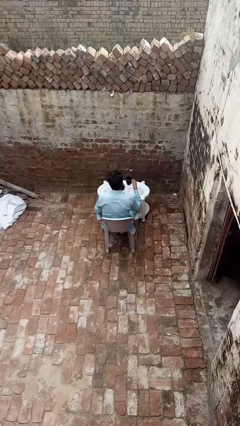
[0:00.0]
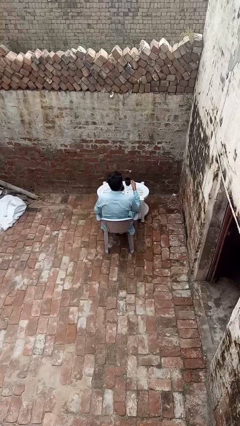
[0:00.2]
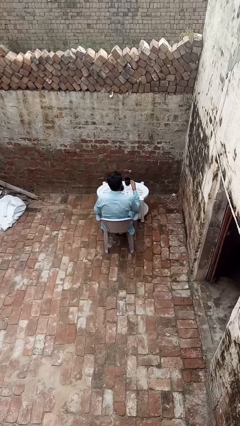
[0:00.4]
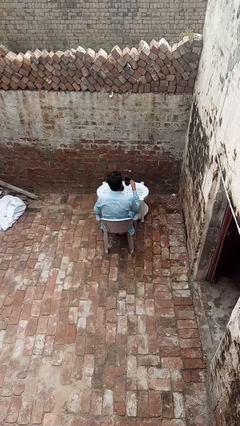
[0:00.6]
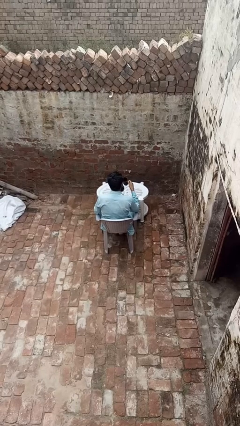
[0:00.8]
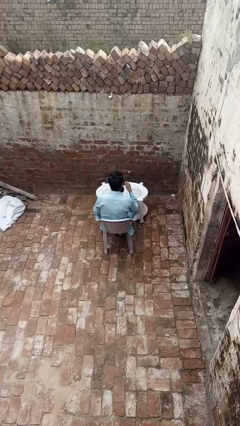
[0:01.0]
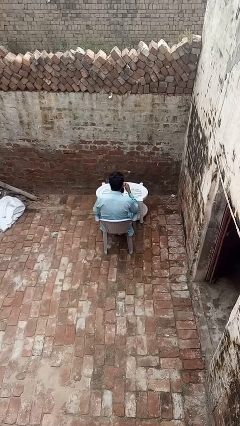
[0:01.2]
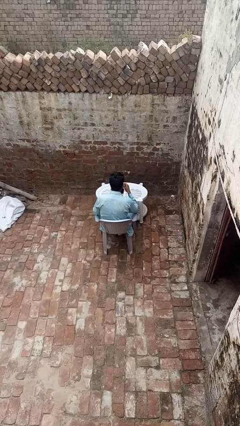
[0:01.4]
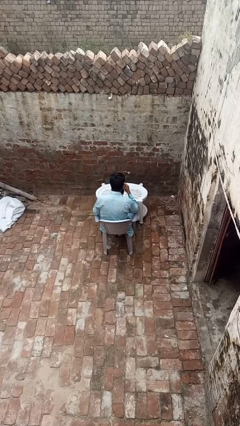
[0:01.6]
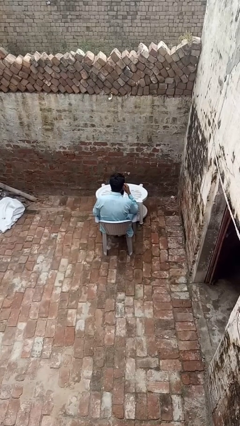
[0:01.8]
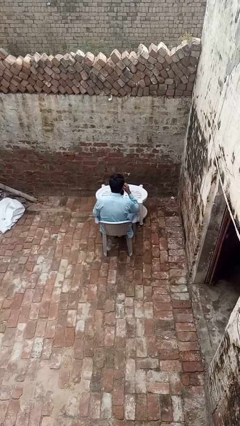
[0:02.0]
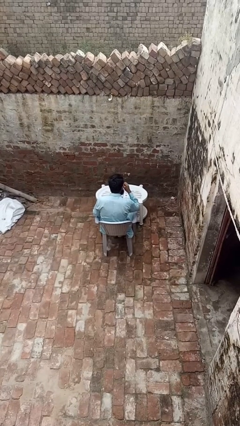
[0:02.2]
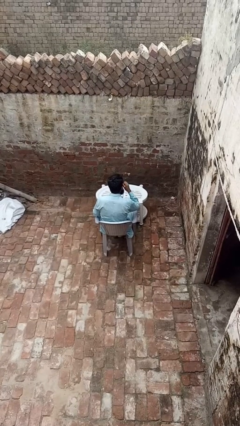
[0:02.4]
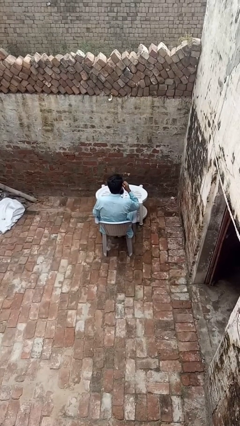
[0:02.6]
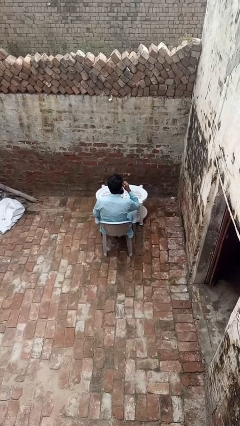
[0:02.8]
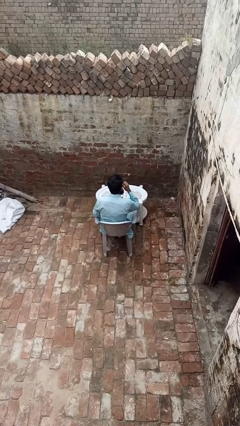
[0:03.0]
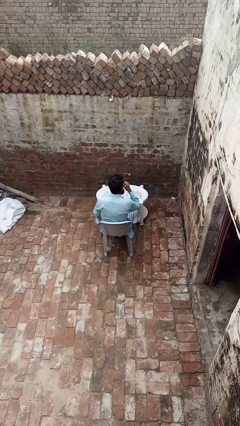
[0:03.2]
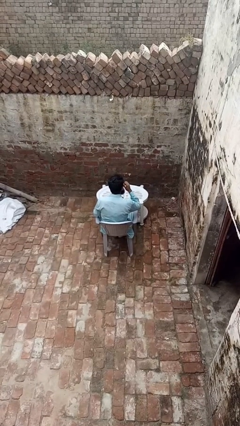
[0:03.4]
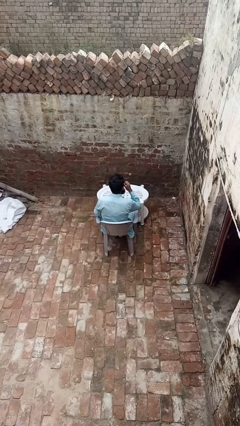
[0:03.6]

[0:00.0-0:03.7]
person drinks from mug

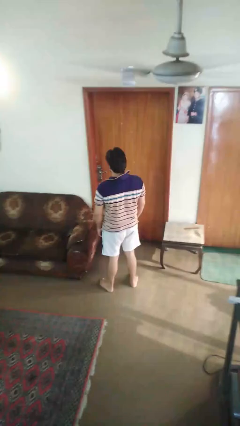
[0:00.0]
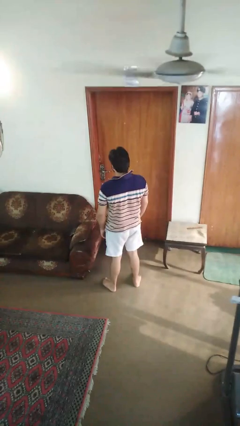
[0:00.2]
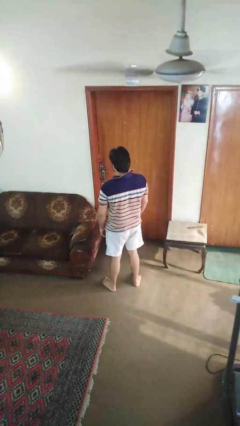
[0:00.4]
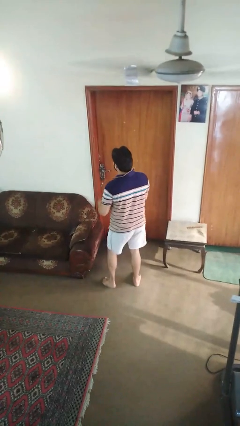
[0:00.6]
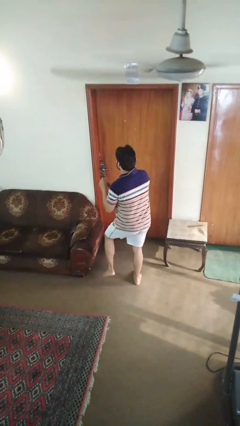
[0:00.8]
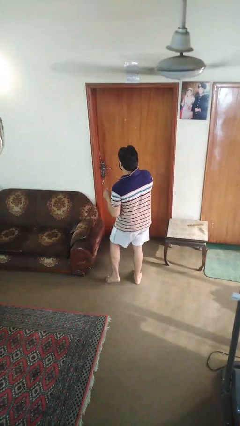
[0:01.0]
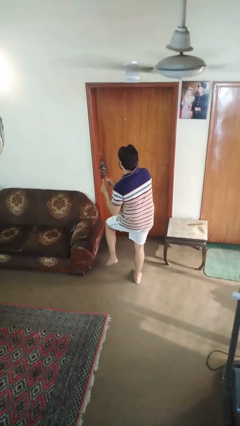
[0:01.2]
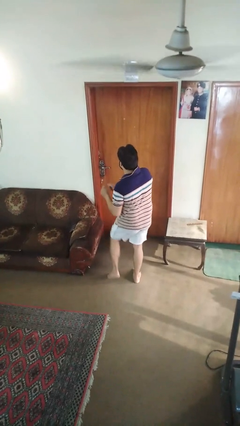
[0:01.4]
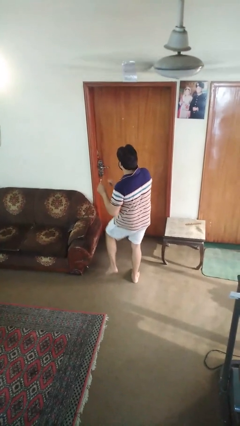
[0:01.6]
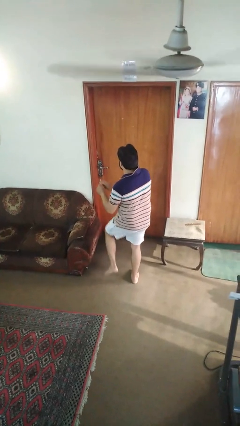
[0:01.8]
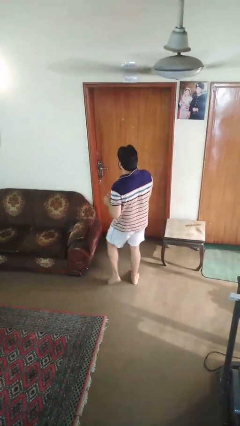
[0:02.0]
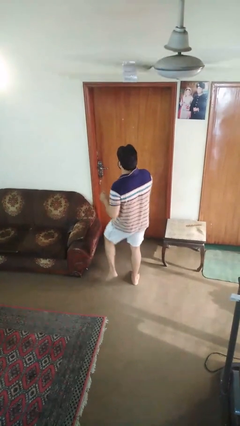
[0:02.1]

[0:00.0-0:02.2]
person dances in place

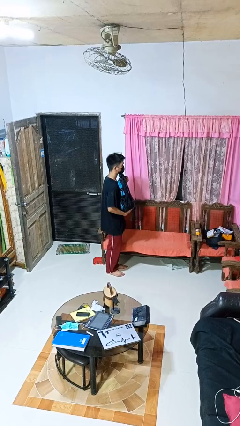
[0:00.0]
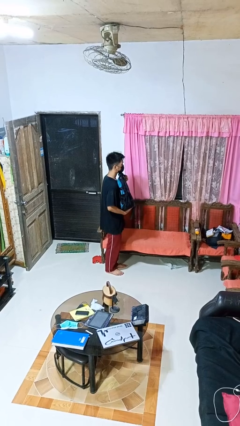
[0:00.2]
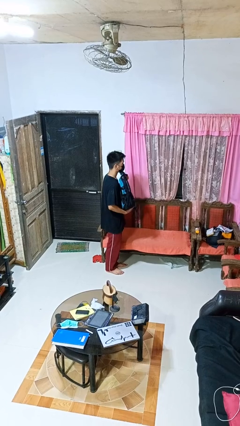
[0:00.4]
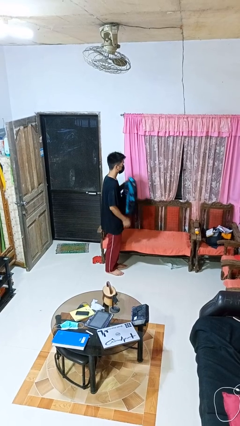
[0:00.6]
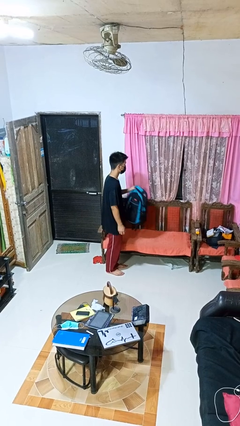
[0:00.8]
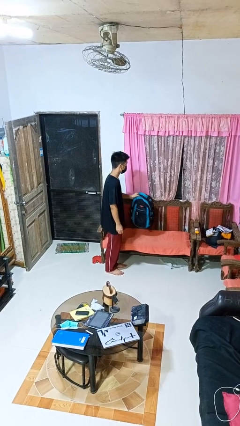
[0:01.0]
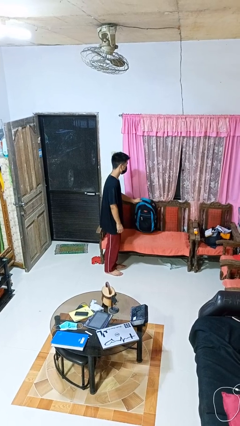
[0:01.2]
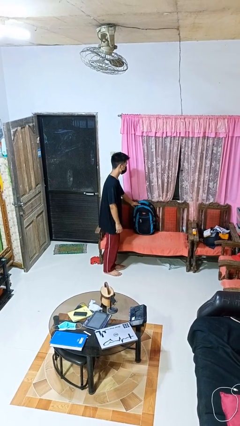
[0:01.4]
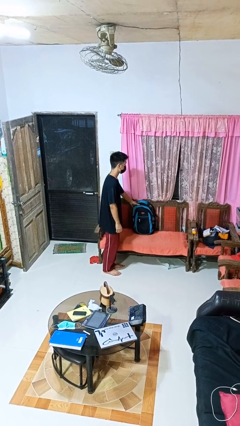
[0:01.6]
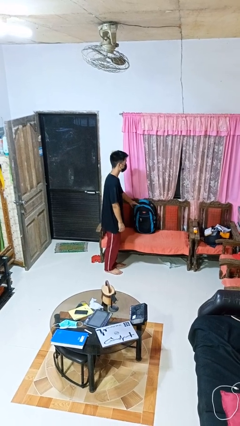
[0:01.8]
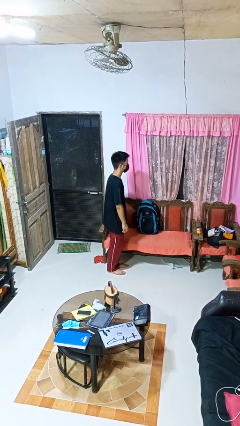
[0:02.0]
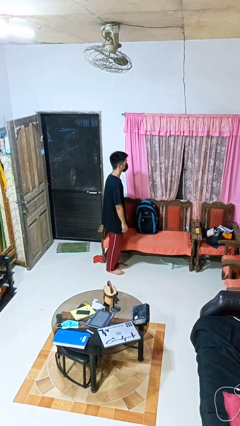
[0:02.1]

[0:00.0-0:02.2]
person puts down object on couch

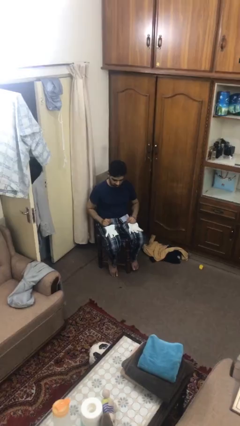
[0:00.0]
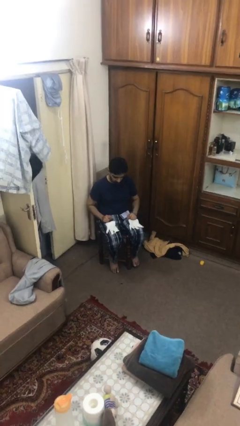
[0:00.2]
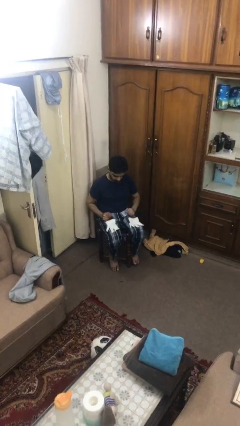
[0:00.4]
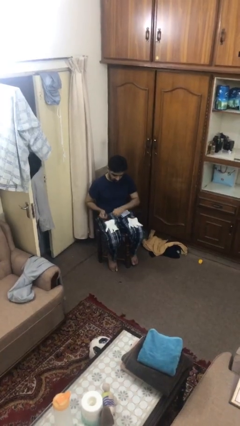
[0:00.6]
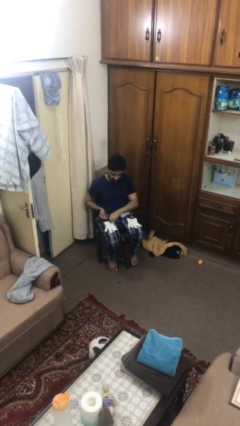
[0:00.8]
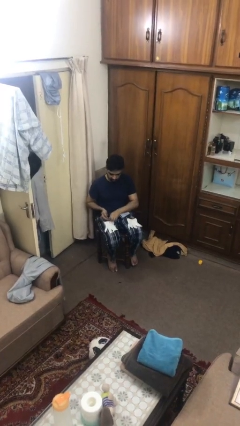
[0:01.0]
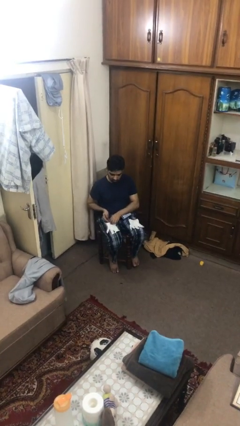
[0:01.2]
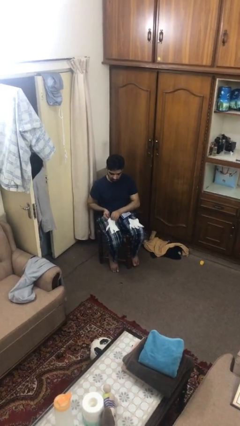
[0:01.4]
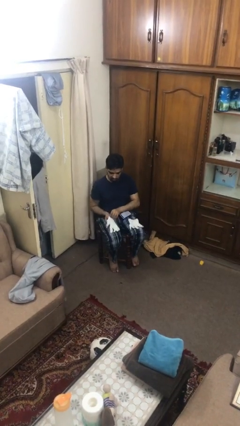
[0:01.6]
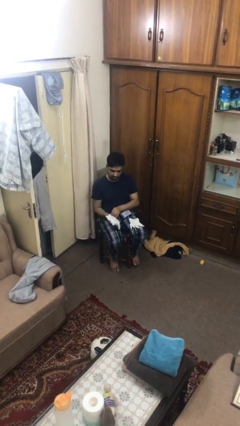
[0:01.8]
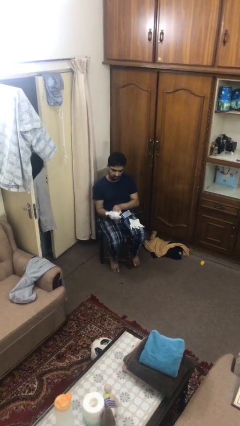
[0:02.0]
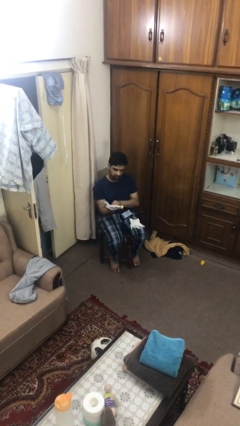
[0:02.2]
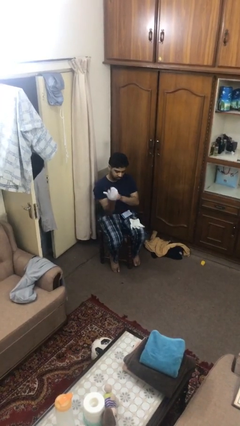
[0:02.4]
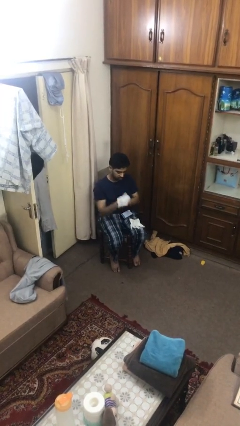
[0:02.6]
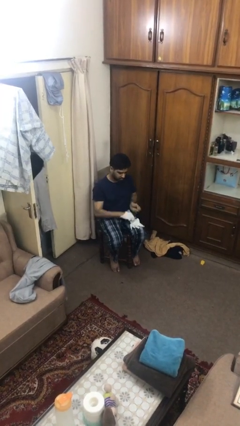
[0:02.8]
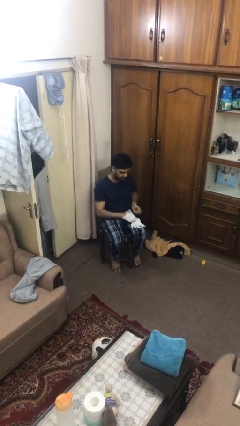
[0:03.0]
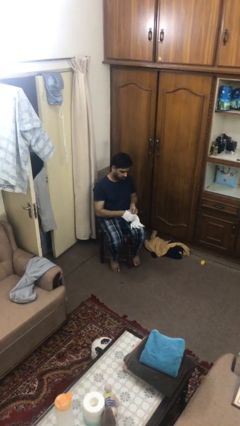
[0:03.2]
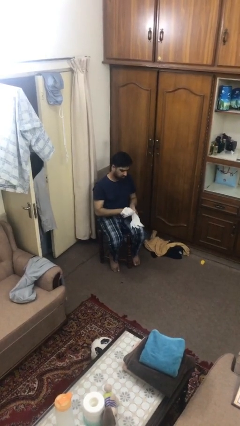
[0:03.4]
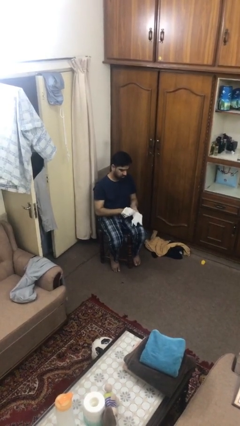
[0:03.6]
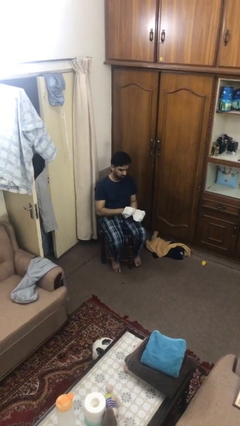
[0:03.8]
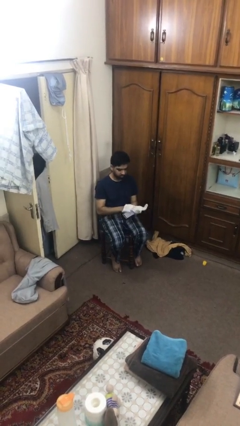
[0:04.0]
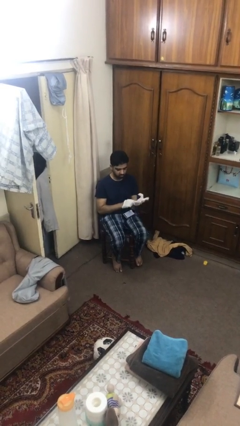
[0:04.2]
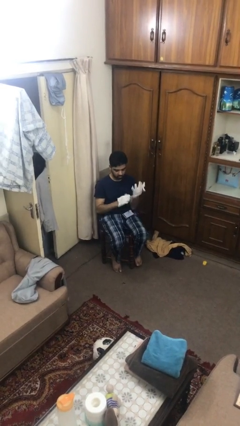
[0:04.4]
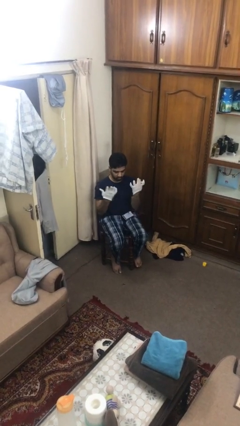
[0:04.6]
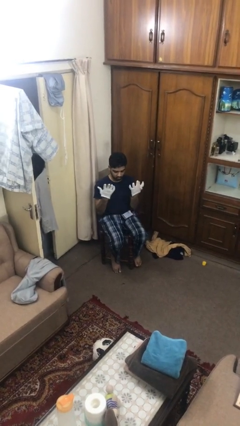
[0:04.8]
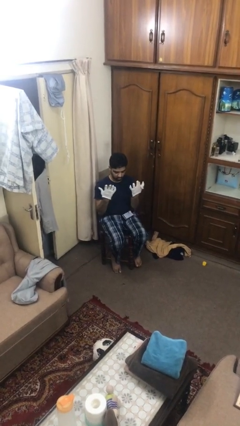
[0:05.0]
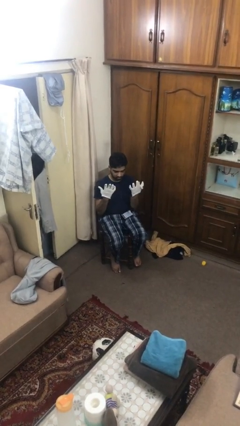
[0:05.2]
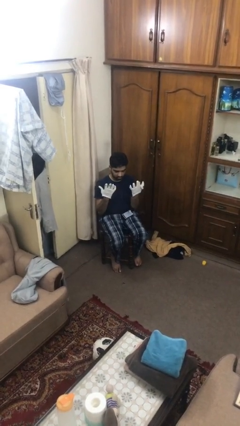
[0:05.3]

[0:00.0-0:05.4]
person puts on gloves

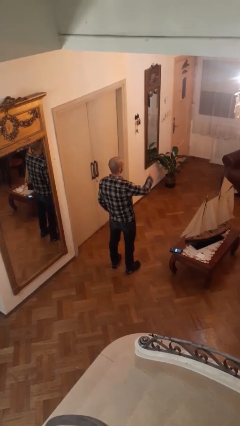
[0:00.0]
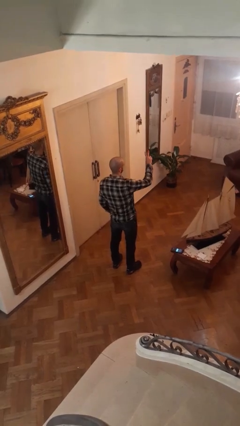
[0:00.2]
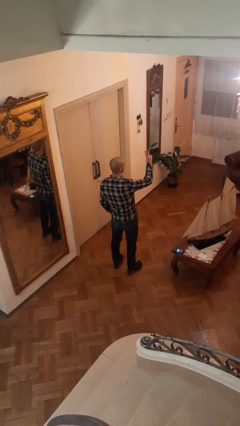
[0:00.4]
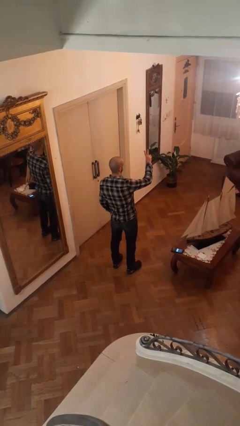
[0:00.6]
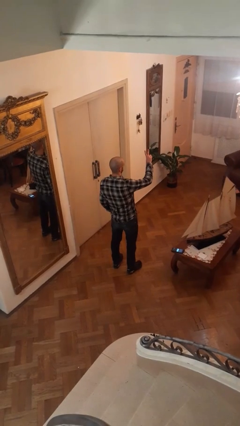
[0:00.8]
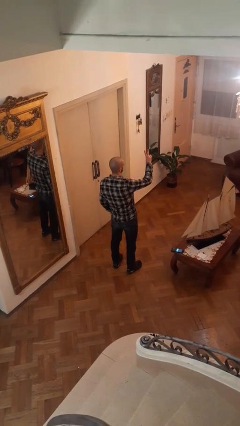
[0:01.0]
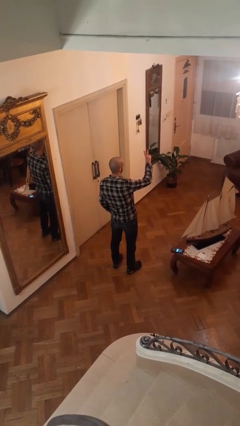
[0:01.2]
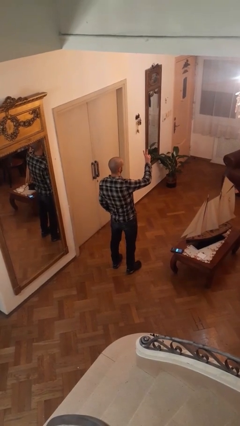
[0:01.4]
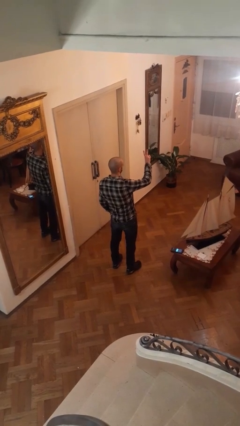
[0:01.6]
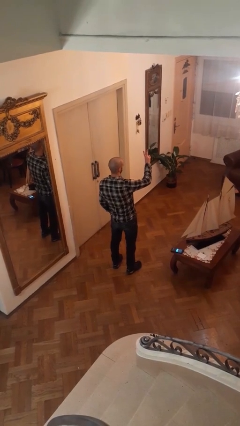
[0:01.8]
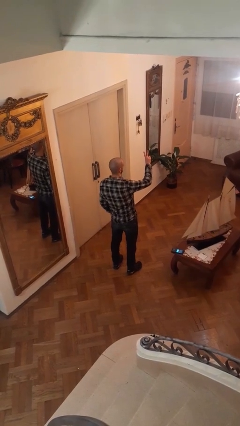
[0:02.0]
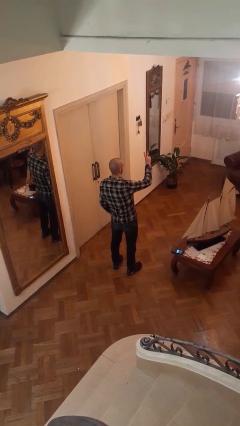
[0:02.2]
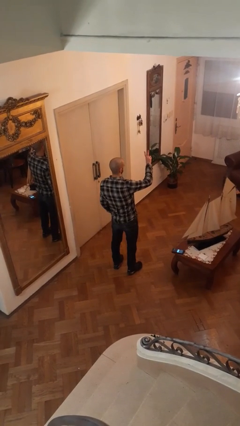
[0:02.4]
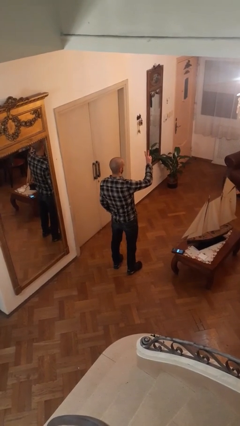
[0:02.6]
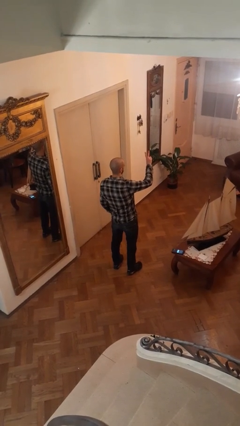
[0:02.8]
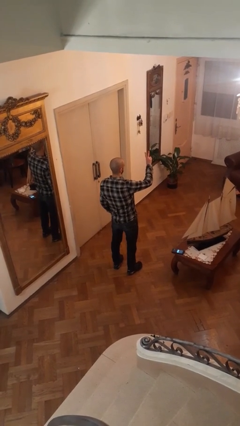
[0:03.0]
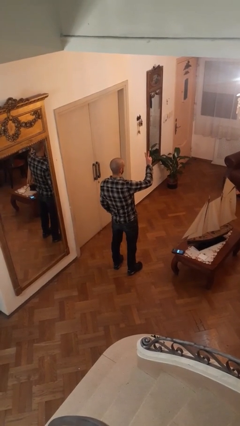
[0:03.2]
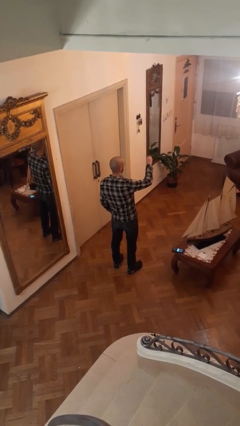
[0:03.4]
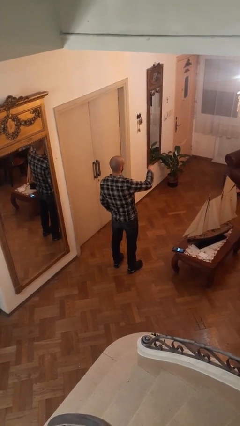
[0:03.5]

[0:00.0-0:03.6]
person gestures peace

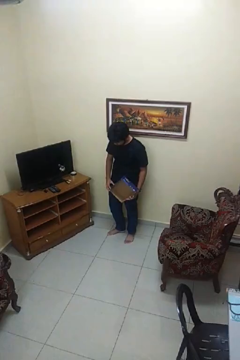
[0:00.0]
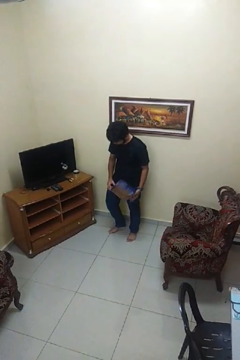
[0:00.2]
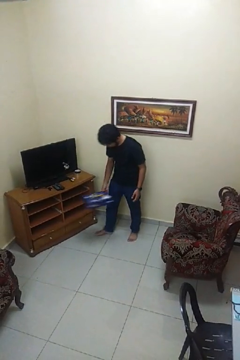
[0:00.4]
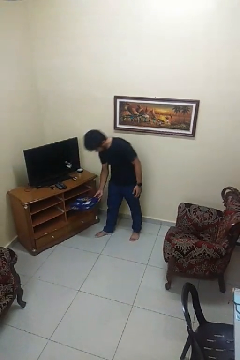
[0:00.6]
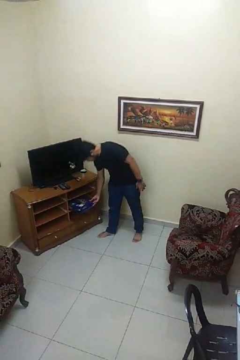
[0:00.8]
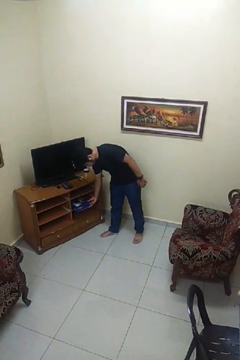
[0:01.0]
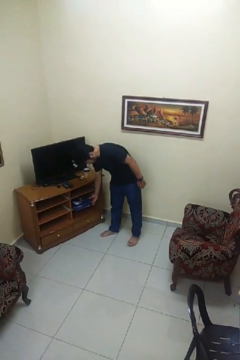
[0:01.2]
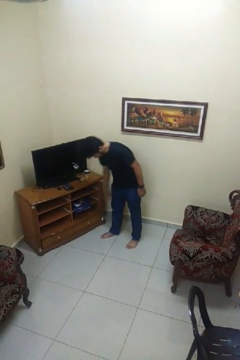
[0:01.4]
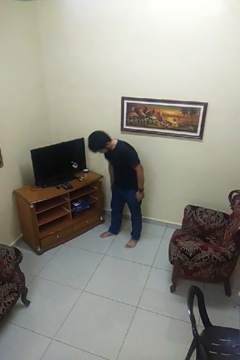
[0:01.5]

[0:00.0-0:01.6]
person puts down object into cabinet
